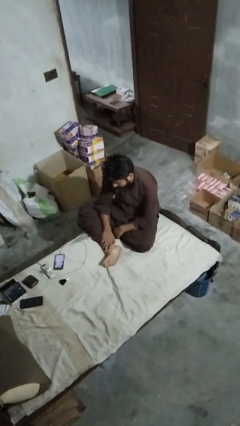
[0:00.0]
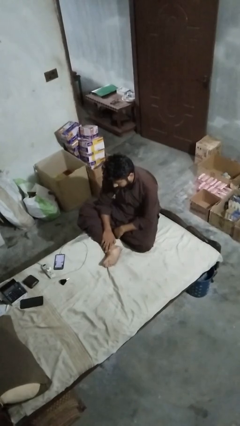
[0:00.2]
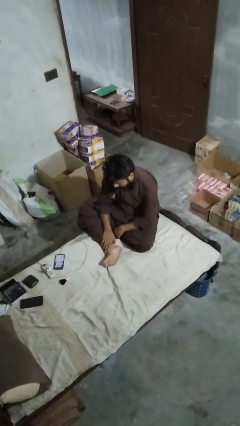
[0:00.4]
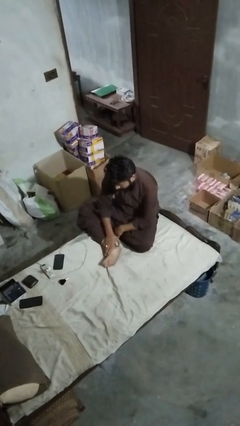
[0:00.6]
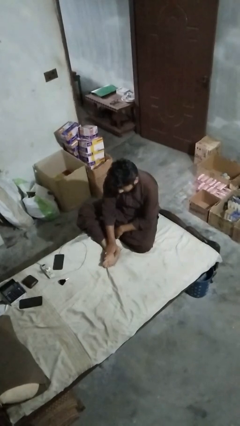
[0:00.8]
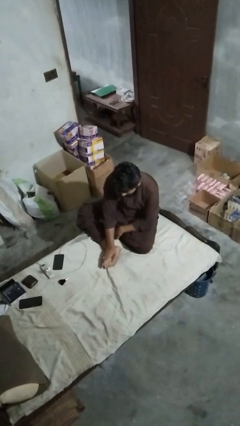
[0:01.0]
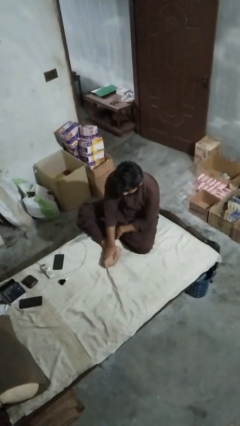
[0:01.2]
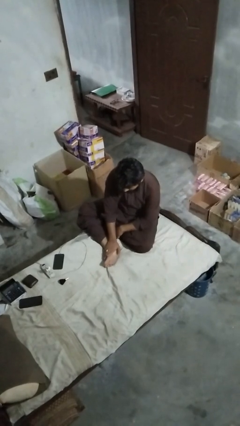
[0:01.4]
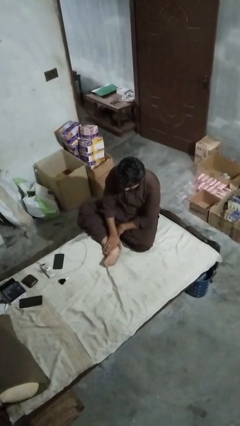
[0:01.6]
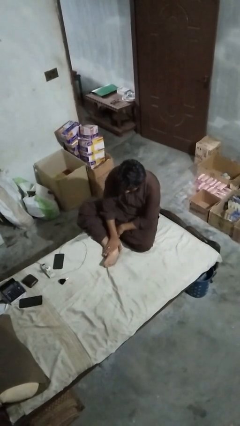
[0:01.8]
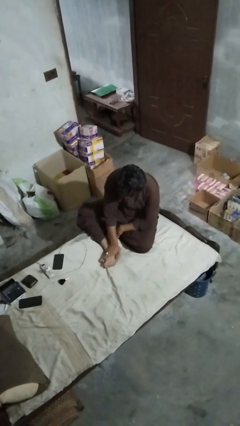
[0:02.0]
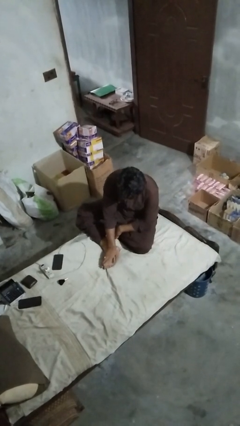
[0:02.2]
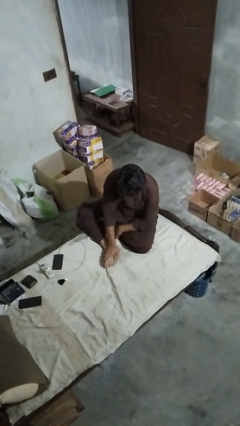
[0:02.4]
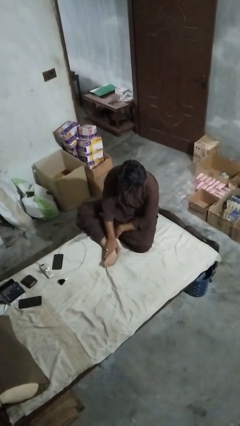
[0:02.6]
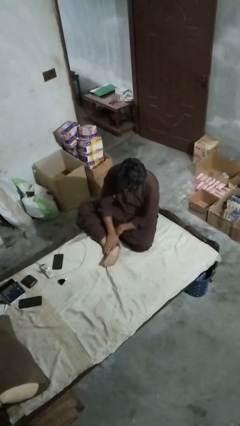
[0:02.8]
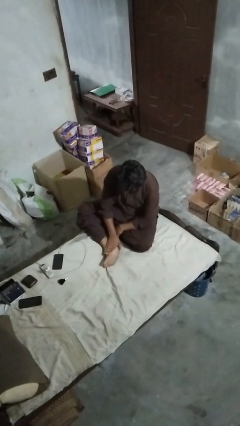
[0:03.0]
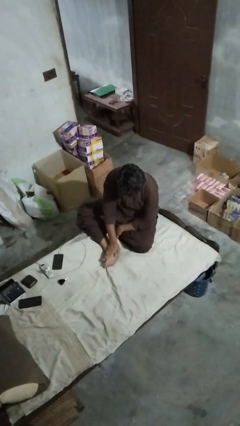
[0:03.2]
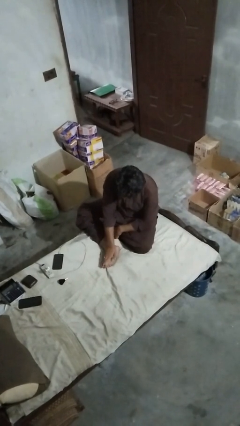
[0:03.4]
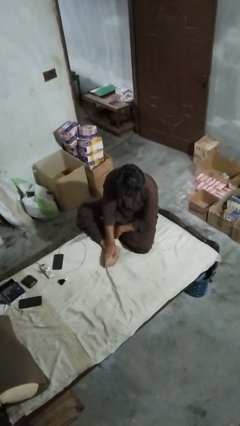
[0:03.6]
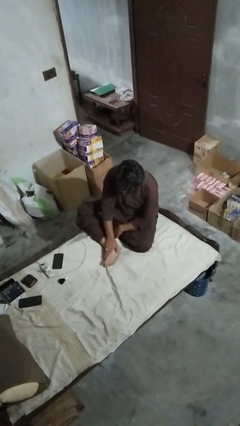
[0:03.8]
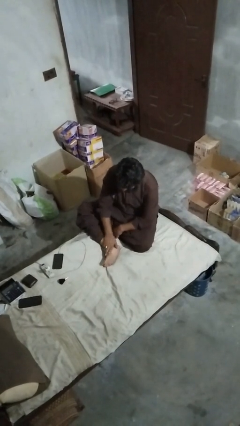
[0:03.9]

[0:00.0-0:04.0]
person rubs foot

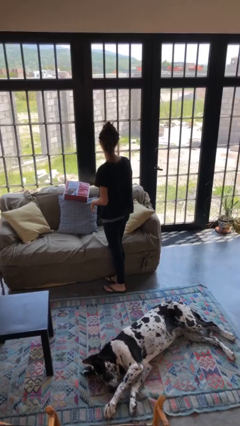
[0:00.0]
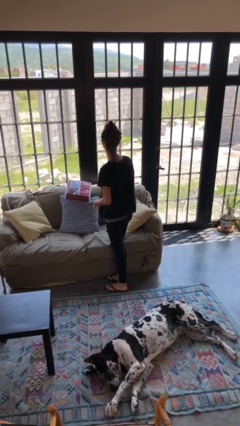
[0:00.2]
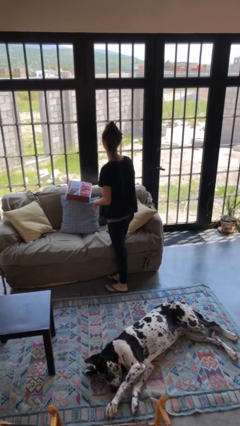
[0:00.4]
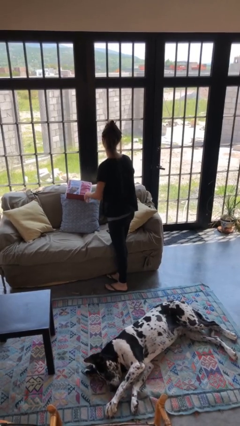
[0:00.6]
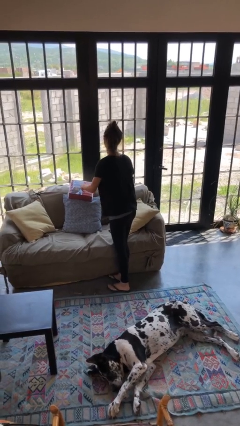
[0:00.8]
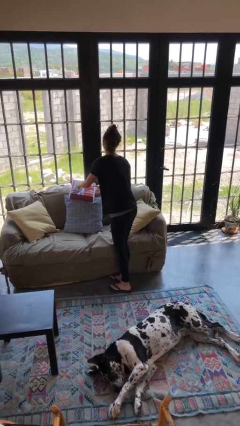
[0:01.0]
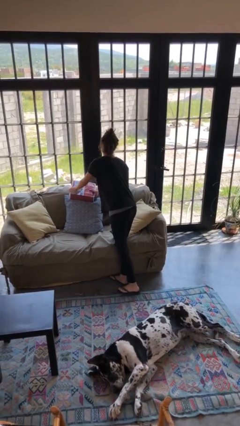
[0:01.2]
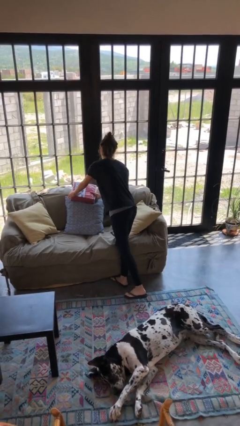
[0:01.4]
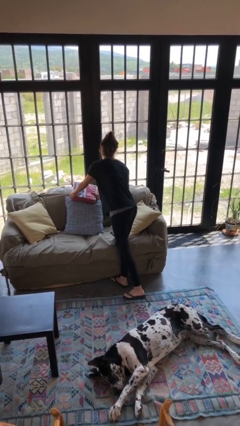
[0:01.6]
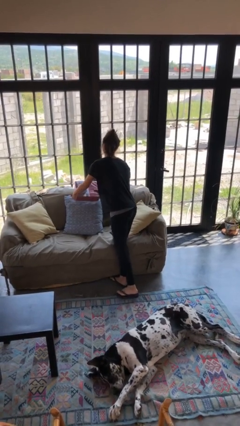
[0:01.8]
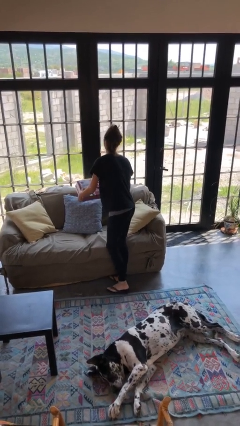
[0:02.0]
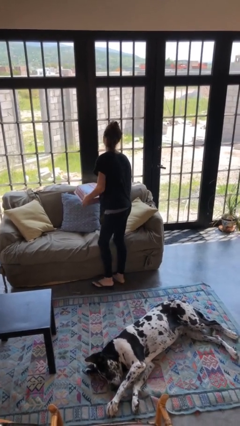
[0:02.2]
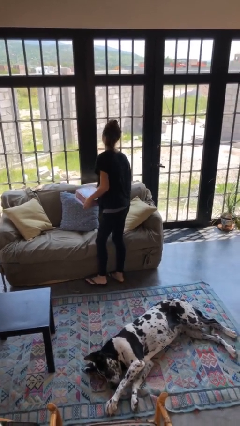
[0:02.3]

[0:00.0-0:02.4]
person picks up object from couch

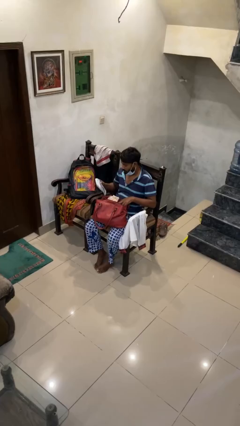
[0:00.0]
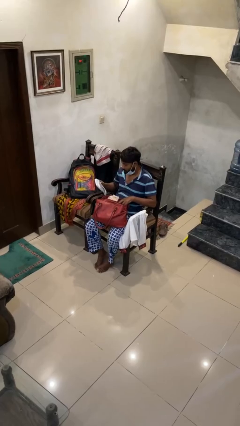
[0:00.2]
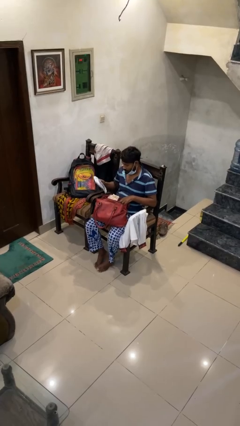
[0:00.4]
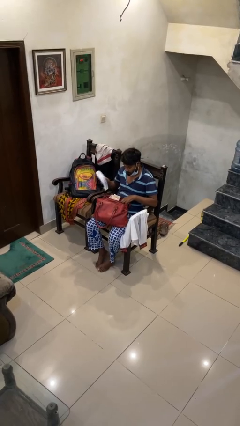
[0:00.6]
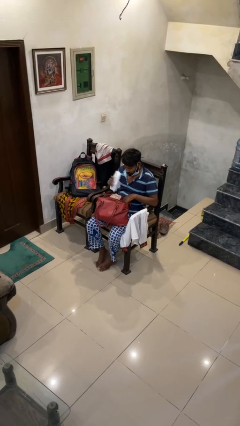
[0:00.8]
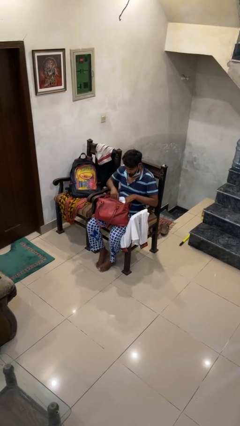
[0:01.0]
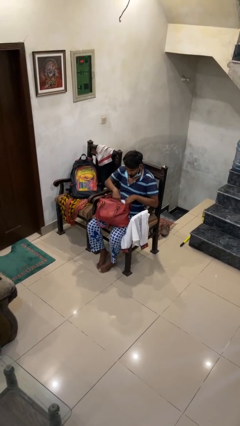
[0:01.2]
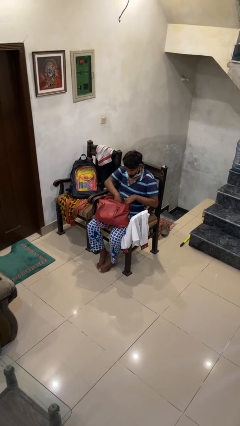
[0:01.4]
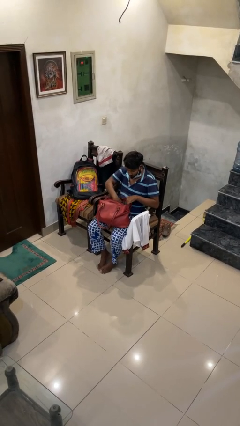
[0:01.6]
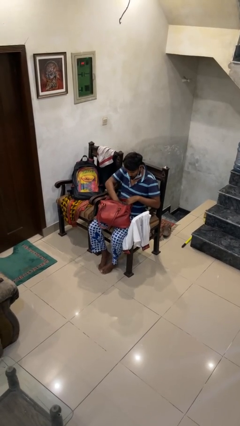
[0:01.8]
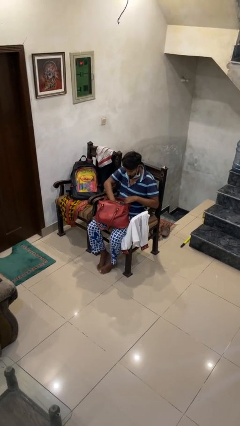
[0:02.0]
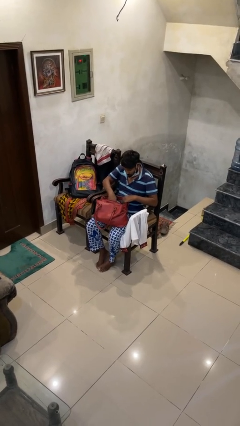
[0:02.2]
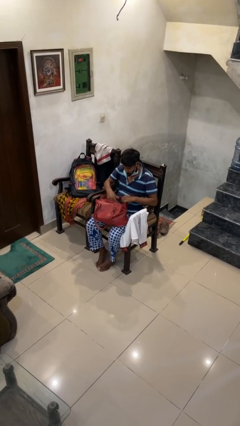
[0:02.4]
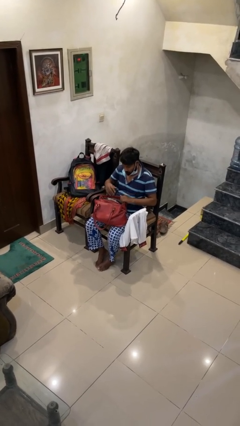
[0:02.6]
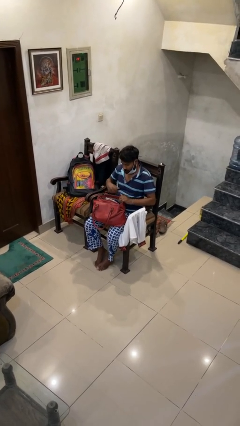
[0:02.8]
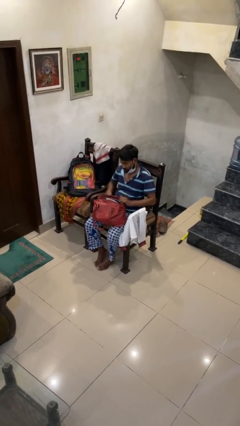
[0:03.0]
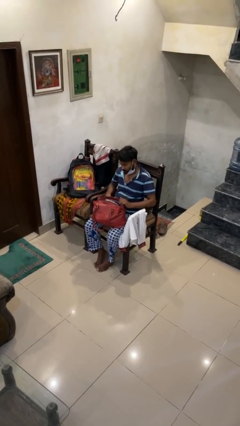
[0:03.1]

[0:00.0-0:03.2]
person puts object into purse

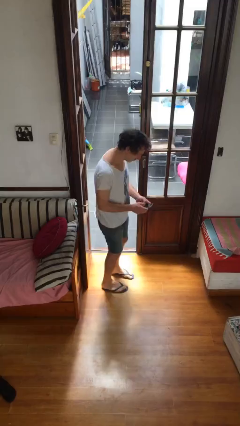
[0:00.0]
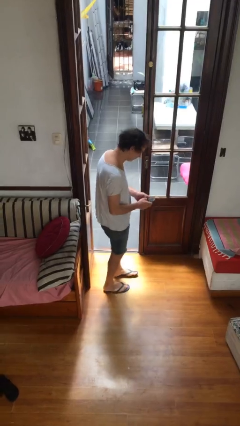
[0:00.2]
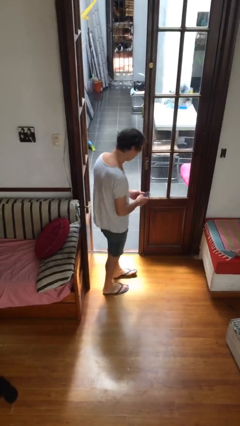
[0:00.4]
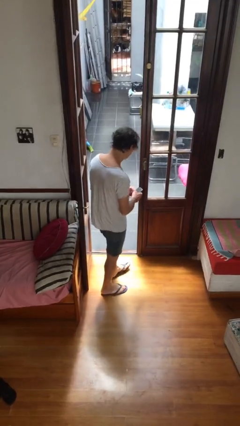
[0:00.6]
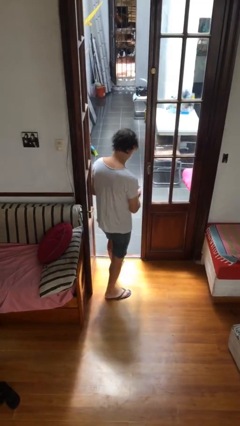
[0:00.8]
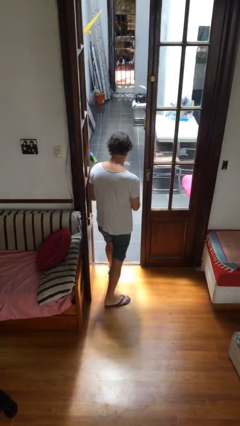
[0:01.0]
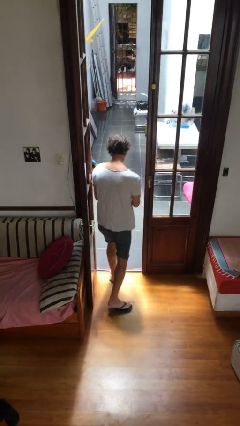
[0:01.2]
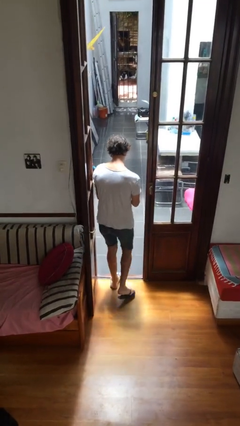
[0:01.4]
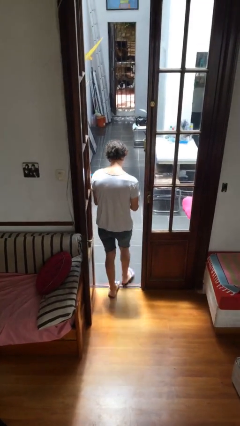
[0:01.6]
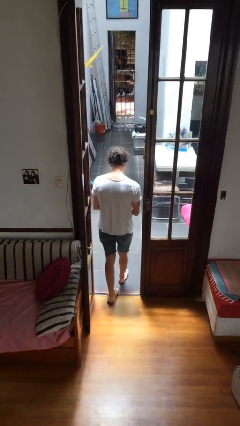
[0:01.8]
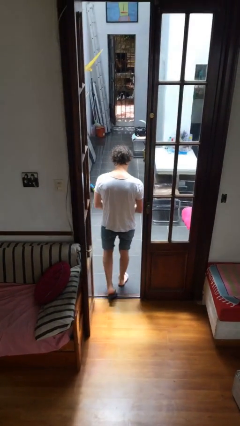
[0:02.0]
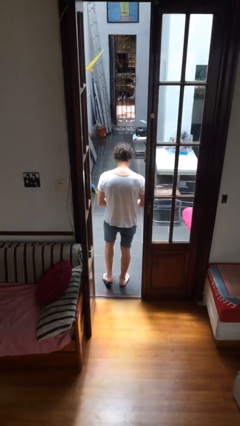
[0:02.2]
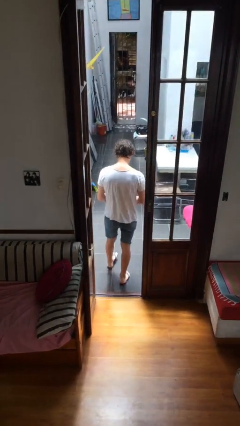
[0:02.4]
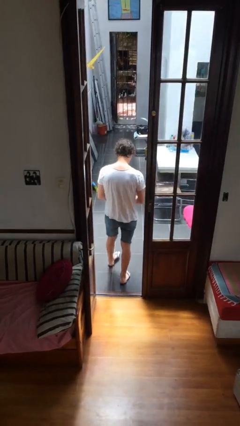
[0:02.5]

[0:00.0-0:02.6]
person exits scene through structure

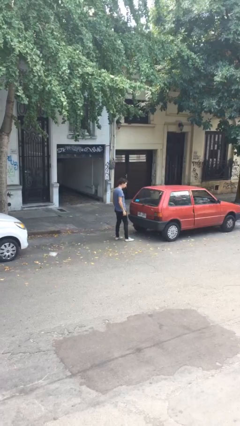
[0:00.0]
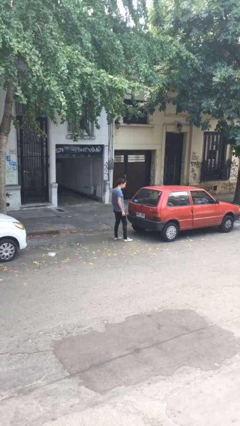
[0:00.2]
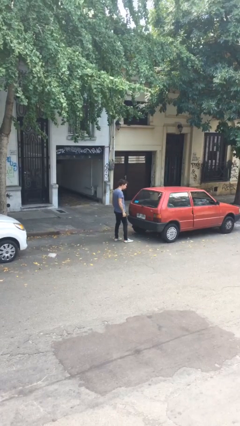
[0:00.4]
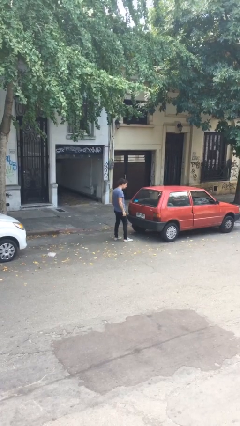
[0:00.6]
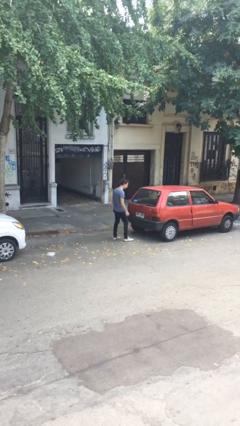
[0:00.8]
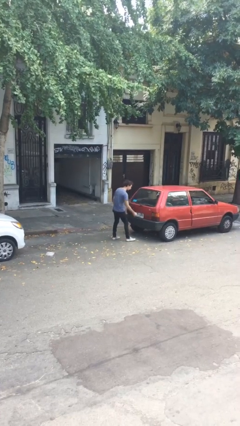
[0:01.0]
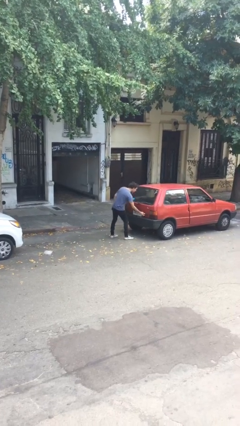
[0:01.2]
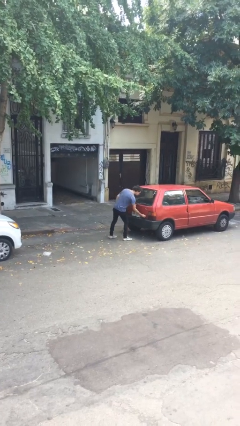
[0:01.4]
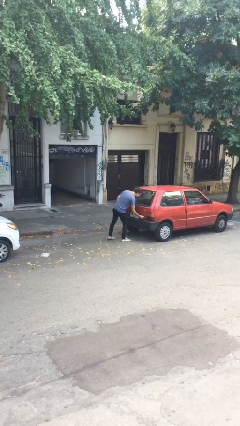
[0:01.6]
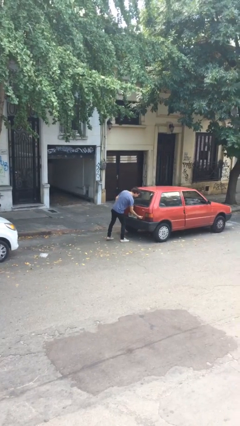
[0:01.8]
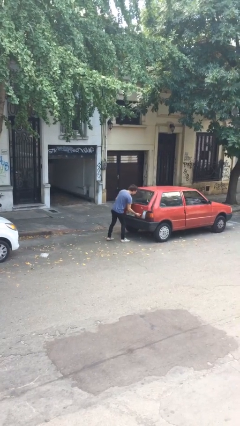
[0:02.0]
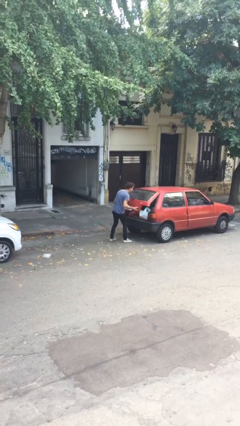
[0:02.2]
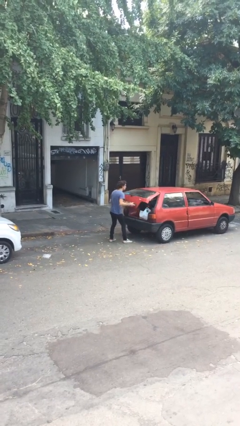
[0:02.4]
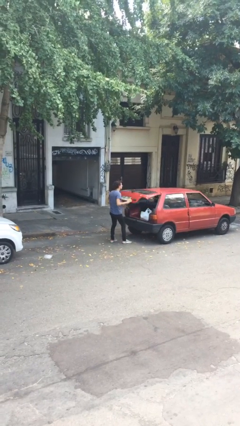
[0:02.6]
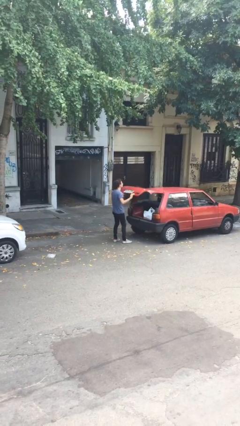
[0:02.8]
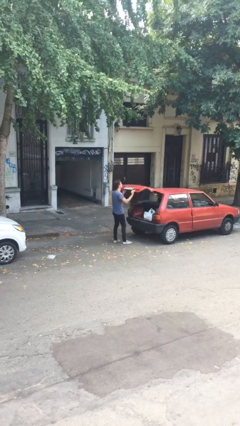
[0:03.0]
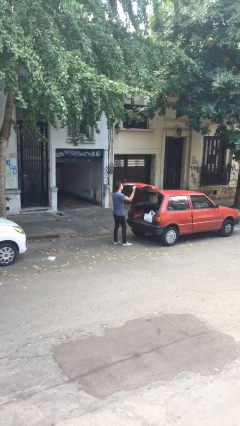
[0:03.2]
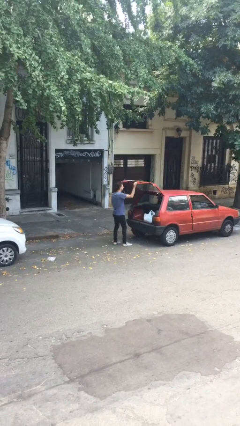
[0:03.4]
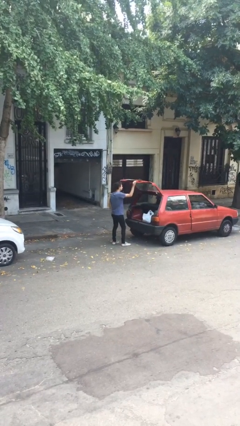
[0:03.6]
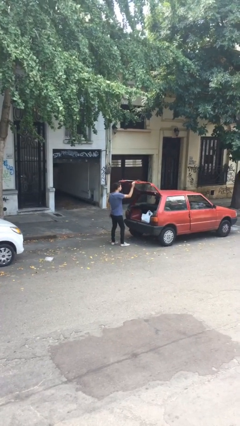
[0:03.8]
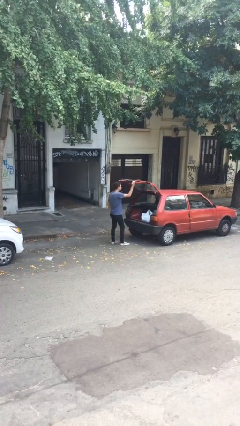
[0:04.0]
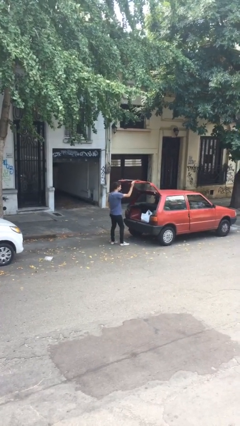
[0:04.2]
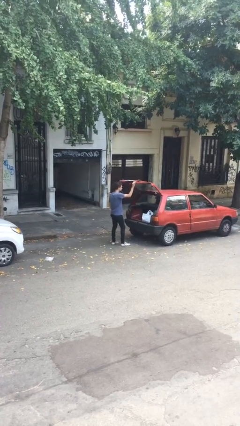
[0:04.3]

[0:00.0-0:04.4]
person opens car trunk

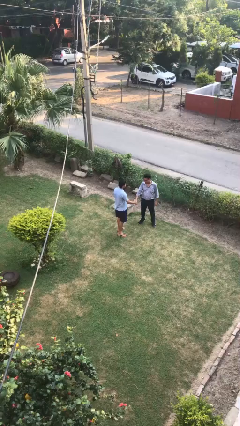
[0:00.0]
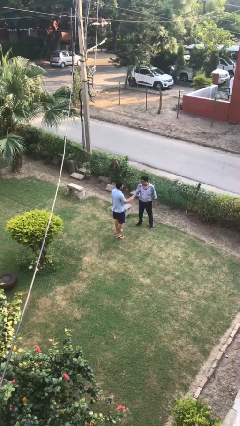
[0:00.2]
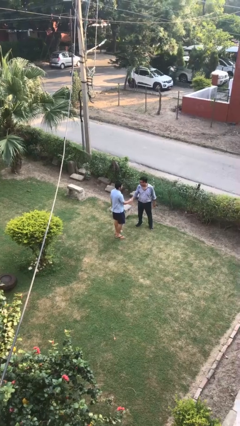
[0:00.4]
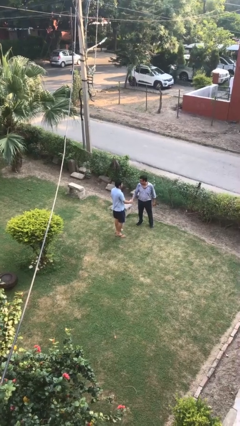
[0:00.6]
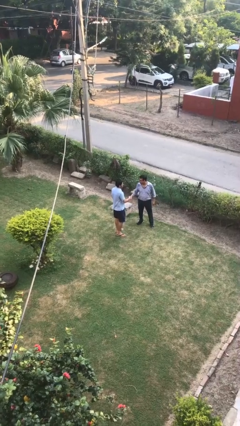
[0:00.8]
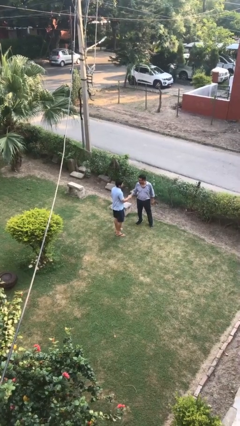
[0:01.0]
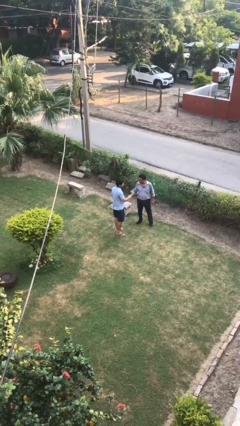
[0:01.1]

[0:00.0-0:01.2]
person shakes hand
